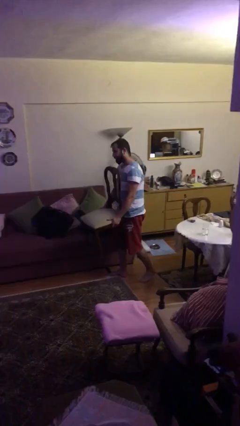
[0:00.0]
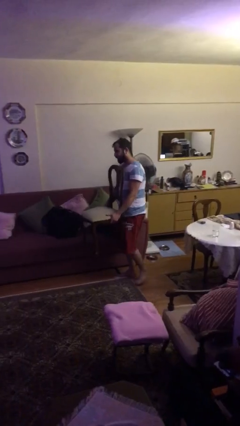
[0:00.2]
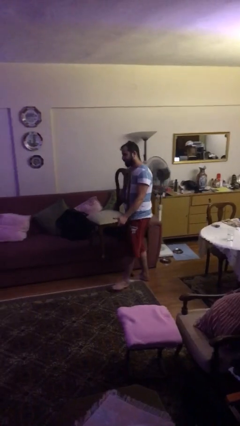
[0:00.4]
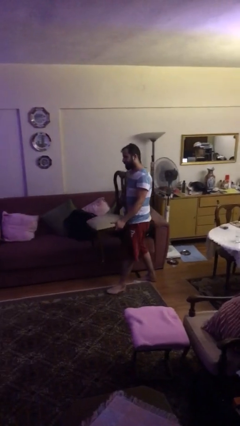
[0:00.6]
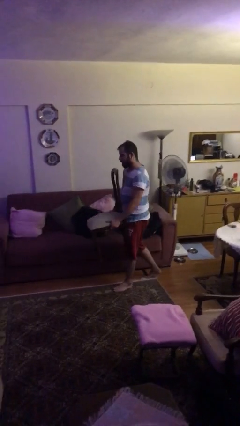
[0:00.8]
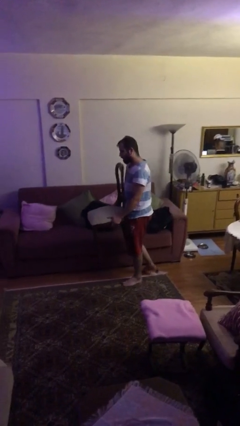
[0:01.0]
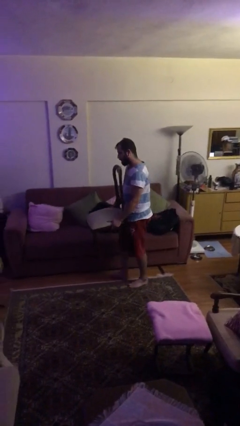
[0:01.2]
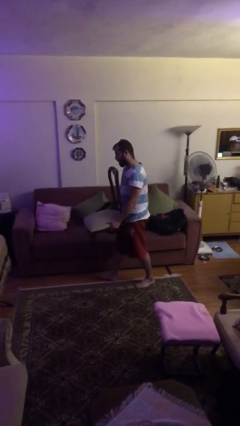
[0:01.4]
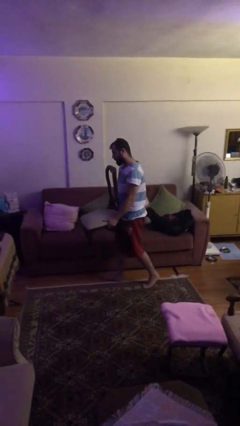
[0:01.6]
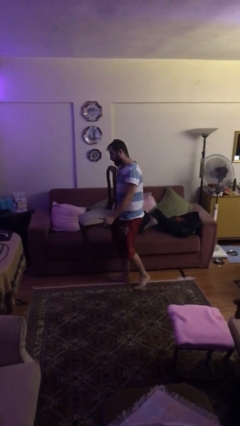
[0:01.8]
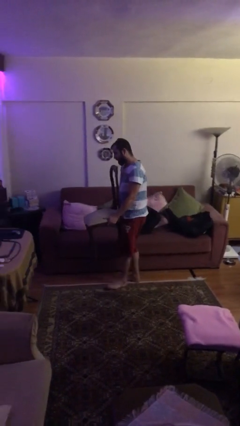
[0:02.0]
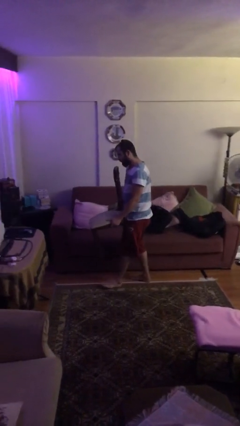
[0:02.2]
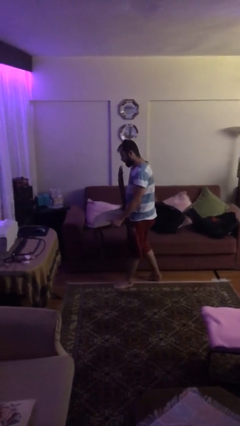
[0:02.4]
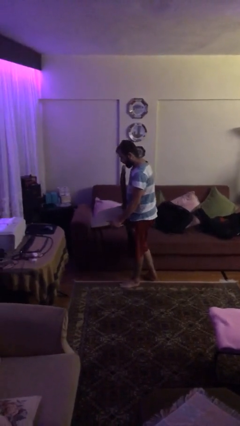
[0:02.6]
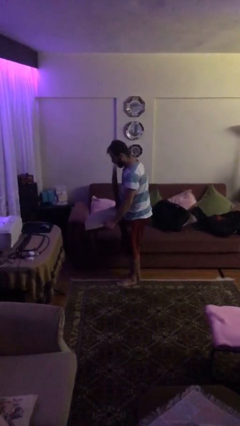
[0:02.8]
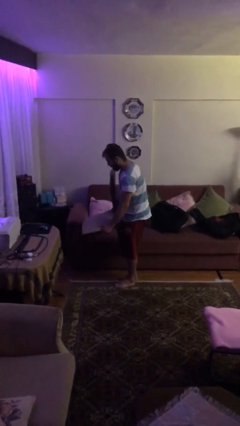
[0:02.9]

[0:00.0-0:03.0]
person carries heavy object

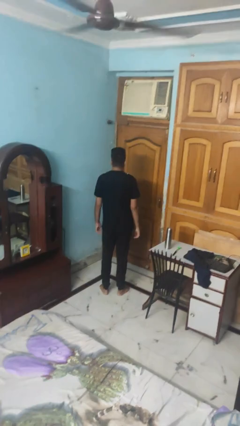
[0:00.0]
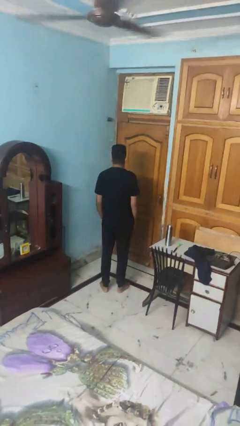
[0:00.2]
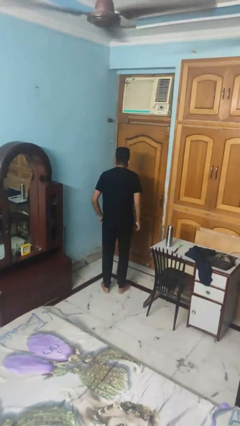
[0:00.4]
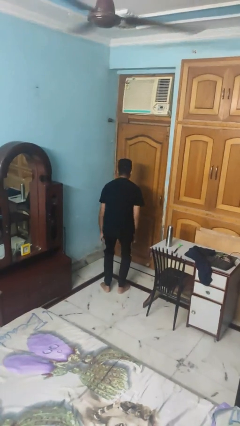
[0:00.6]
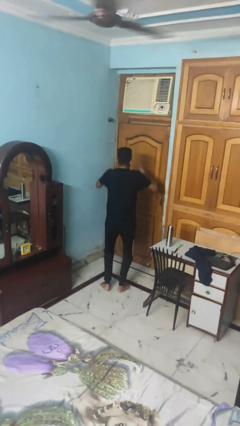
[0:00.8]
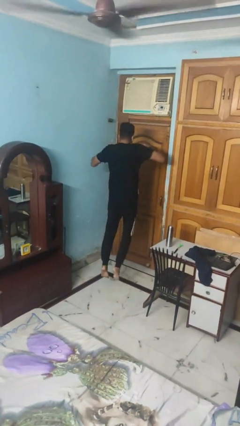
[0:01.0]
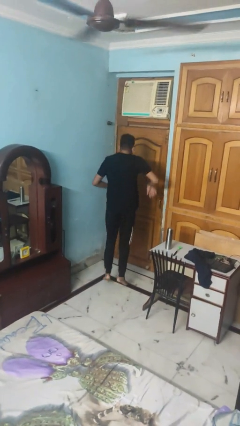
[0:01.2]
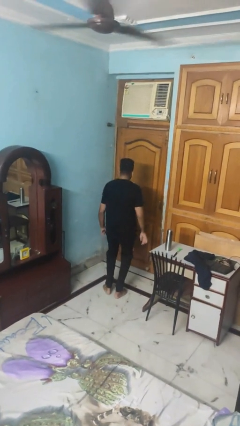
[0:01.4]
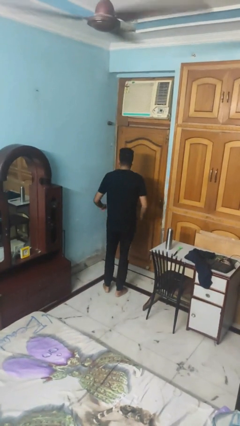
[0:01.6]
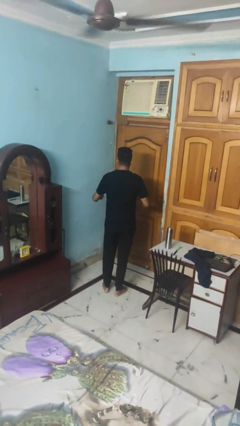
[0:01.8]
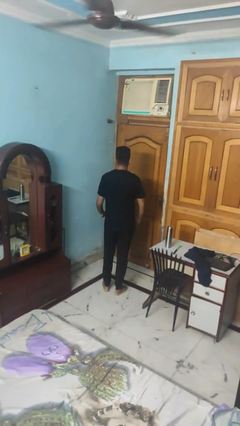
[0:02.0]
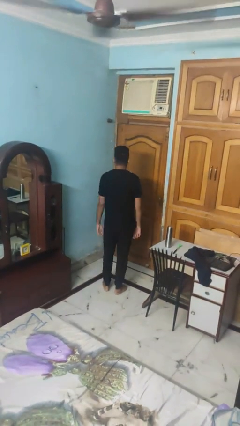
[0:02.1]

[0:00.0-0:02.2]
person jumps

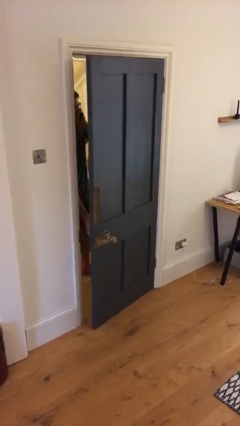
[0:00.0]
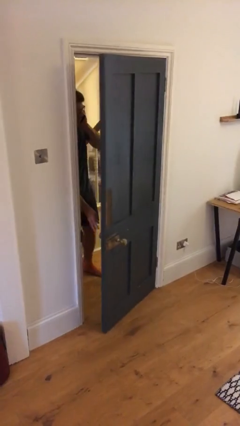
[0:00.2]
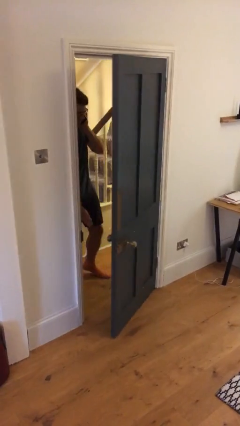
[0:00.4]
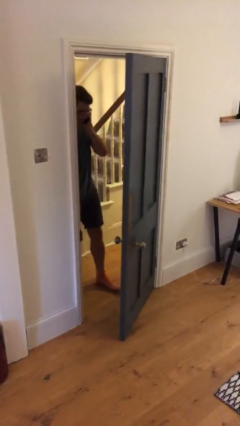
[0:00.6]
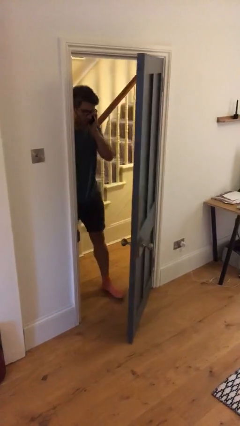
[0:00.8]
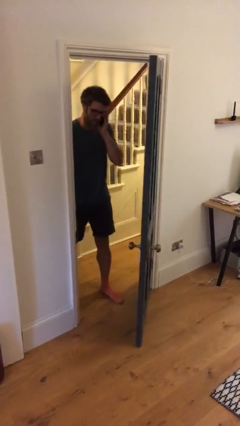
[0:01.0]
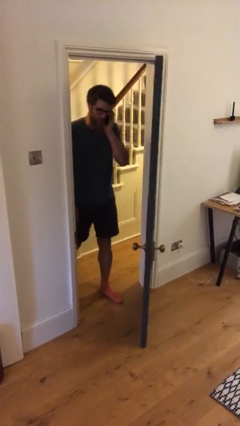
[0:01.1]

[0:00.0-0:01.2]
person opens facility door

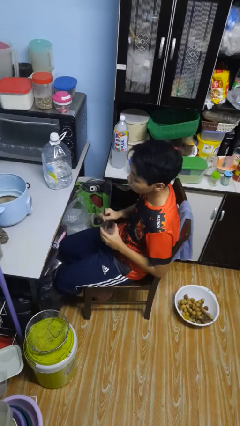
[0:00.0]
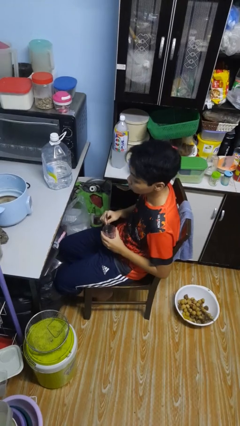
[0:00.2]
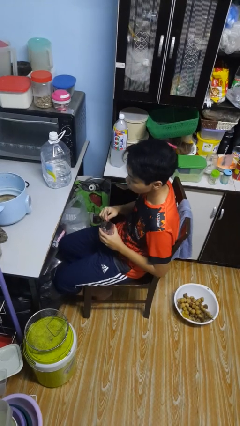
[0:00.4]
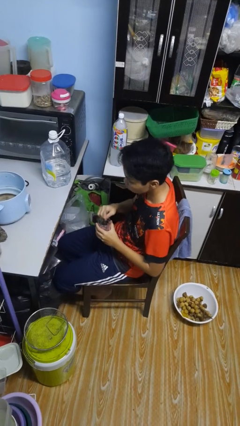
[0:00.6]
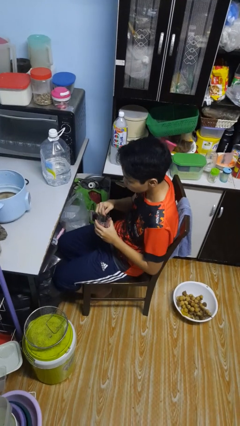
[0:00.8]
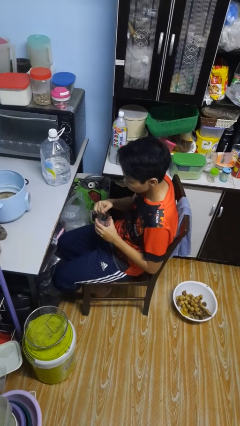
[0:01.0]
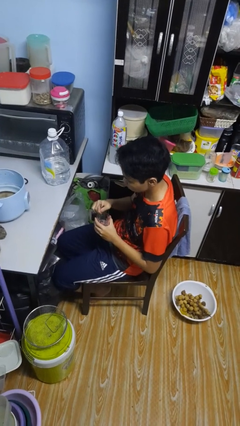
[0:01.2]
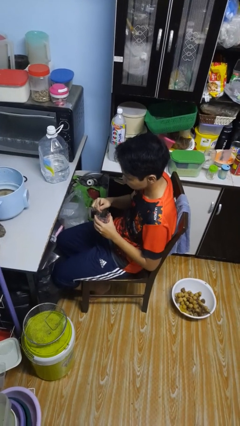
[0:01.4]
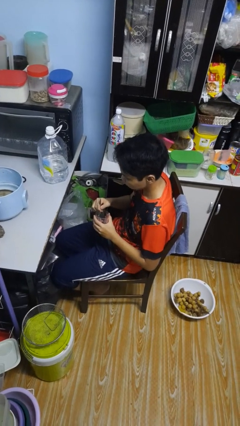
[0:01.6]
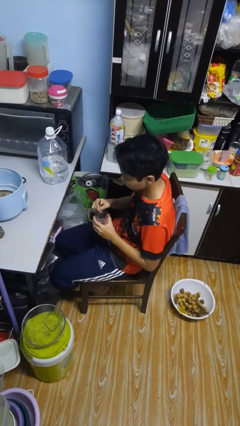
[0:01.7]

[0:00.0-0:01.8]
person stirs mug

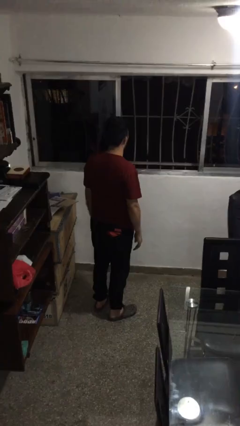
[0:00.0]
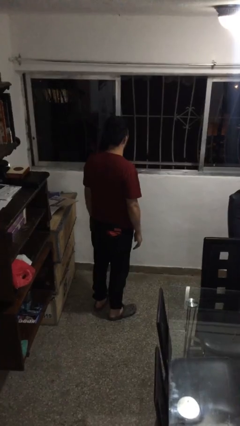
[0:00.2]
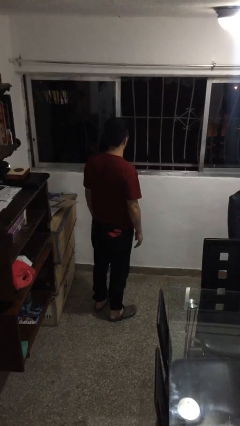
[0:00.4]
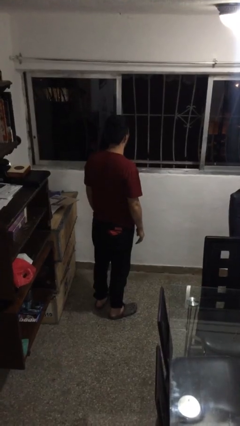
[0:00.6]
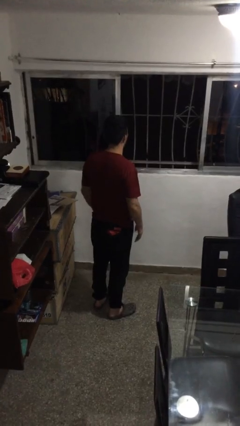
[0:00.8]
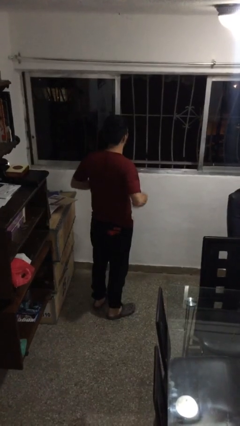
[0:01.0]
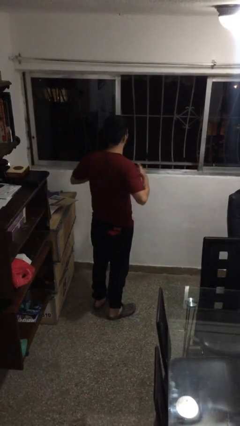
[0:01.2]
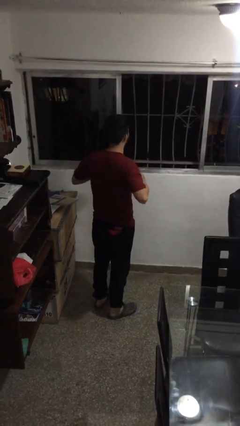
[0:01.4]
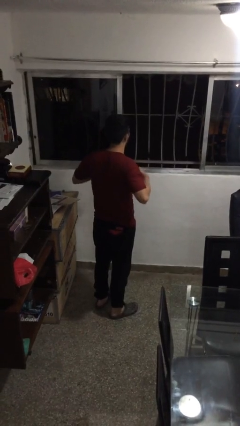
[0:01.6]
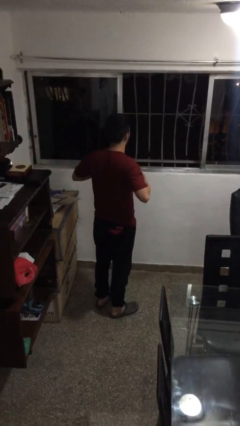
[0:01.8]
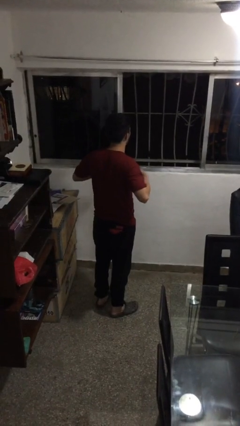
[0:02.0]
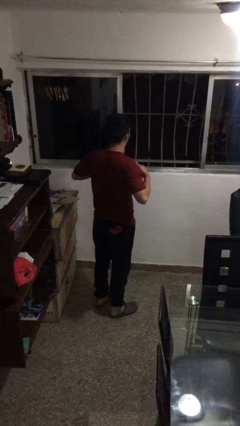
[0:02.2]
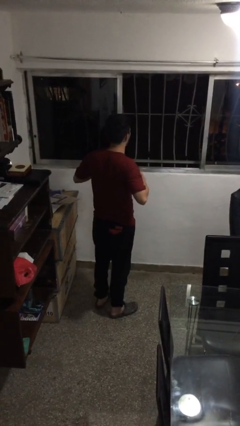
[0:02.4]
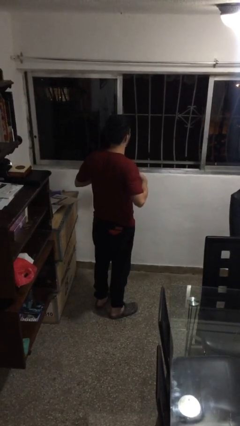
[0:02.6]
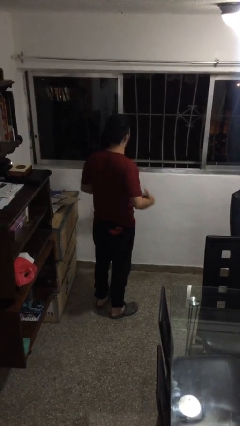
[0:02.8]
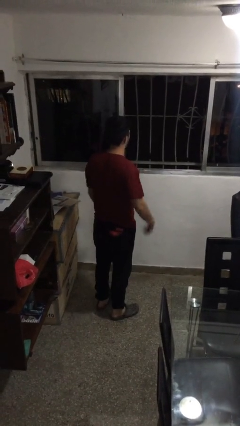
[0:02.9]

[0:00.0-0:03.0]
person drums on chest

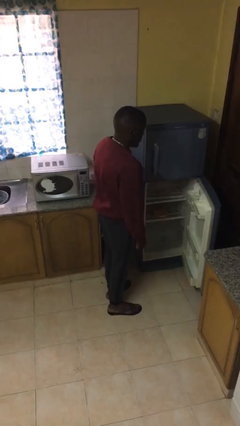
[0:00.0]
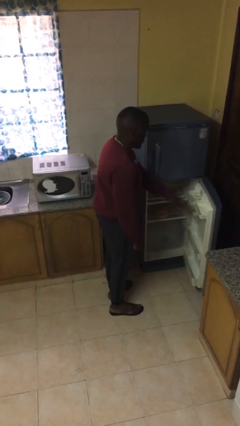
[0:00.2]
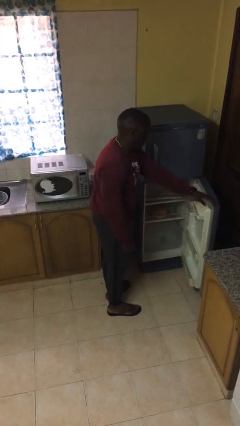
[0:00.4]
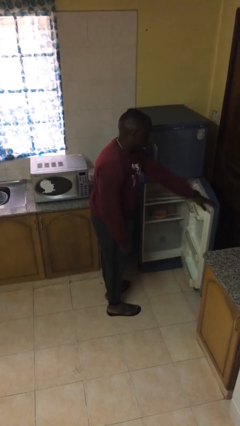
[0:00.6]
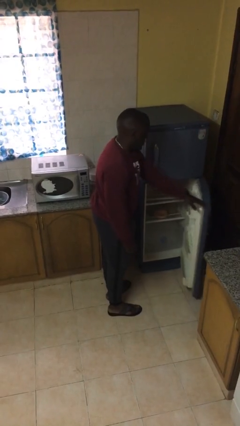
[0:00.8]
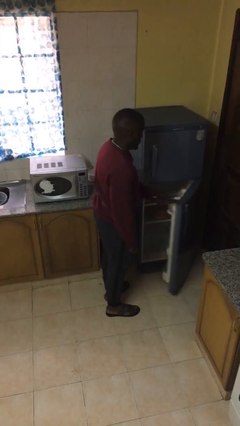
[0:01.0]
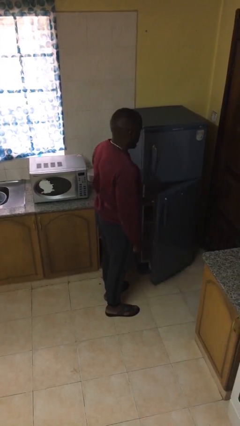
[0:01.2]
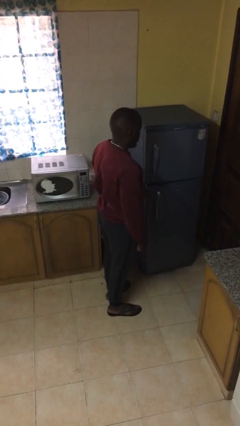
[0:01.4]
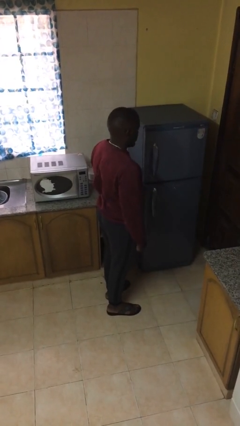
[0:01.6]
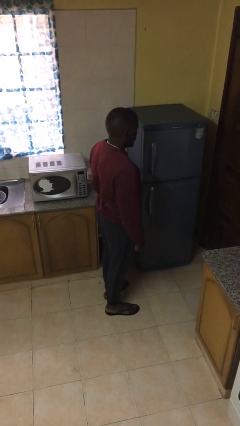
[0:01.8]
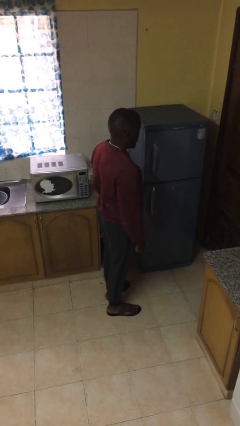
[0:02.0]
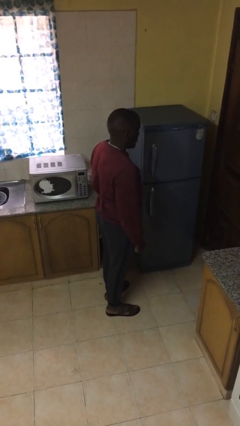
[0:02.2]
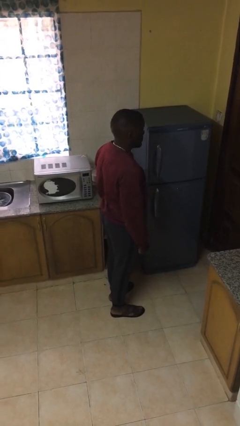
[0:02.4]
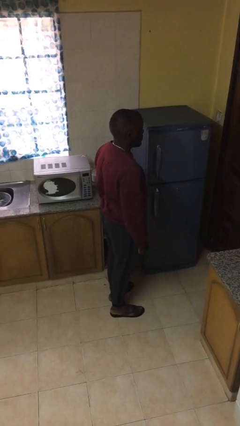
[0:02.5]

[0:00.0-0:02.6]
person closes refrigerator

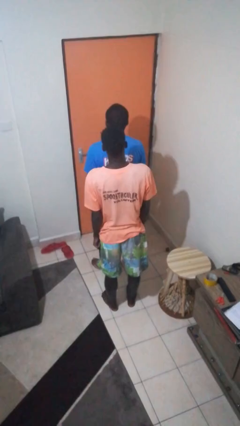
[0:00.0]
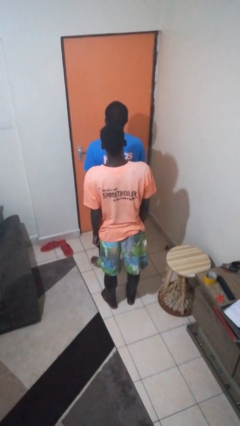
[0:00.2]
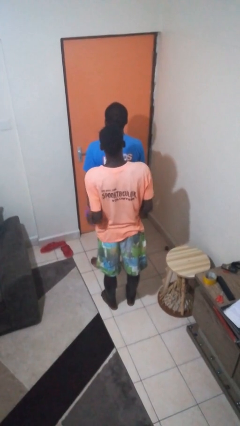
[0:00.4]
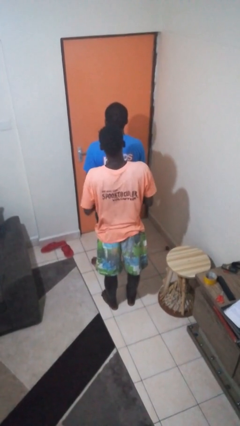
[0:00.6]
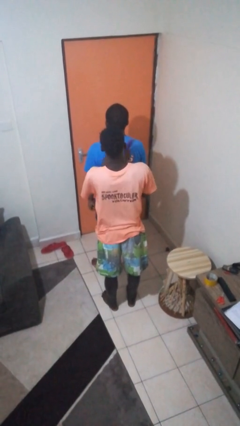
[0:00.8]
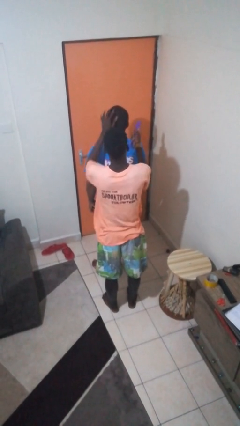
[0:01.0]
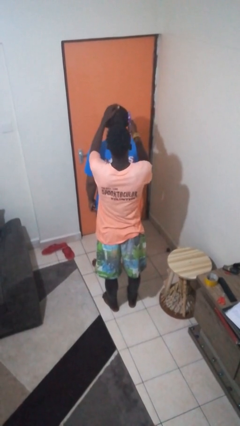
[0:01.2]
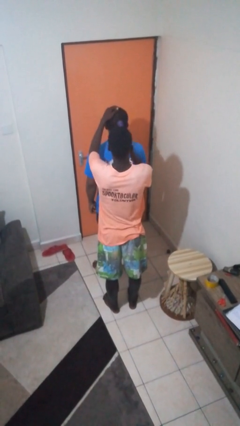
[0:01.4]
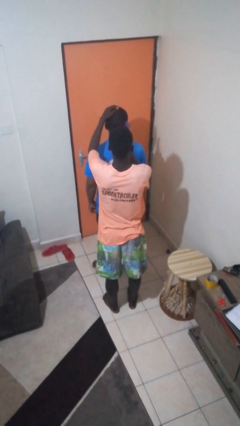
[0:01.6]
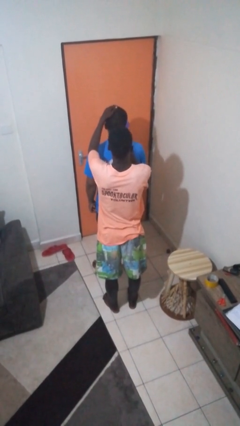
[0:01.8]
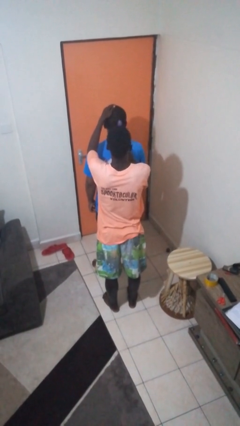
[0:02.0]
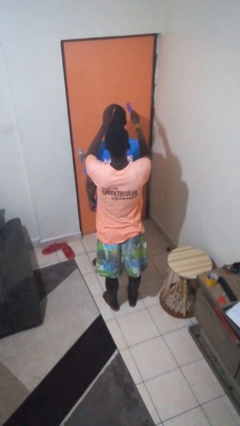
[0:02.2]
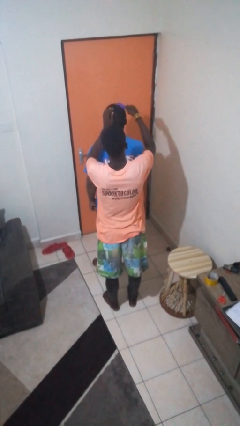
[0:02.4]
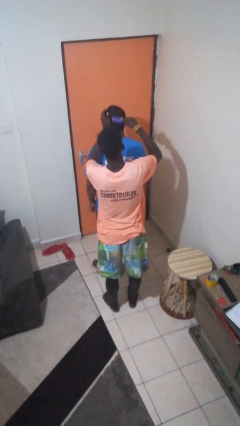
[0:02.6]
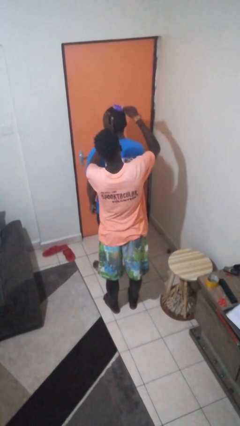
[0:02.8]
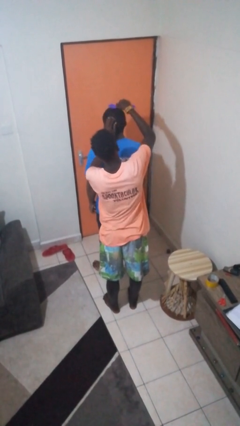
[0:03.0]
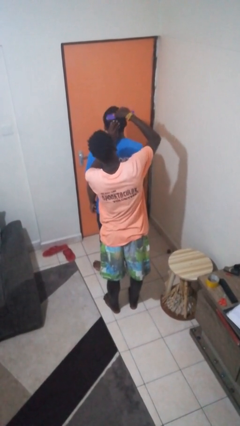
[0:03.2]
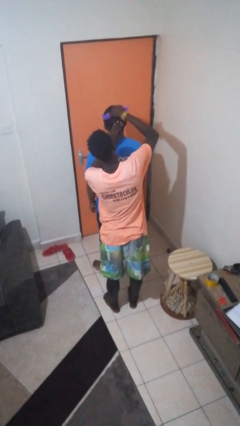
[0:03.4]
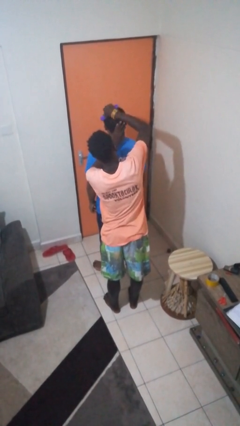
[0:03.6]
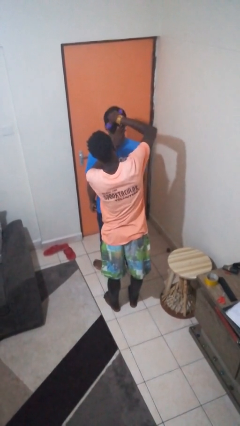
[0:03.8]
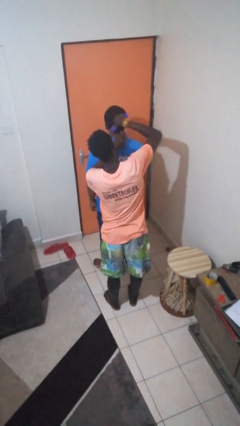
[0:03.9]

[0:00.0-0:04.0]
person brushes hair of person
